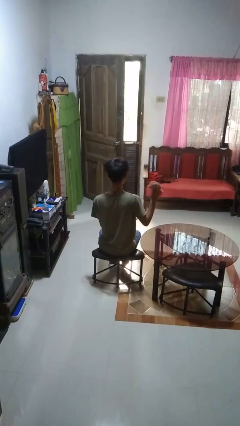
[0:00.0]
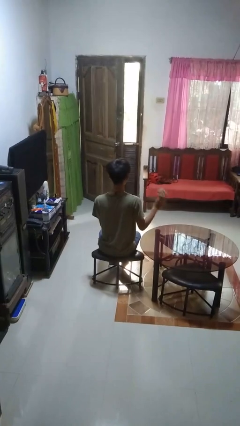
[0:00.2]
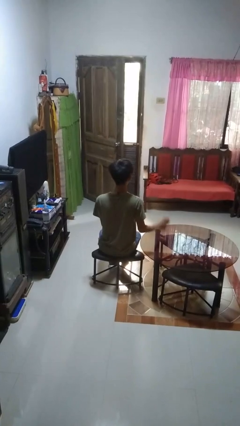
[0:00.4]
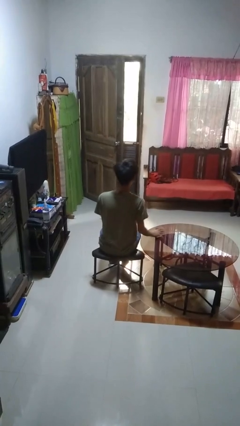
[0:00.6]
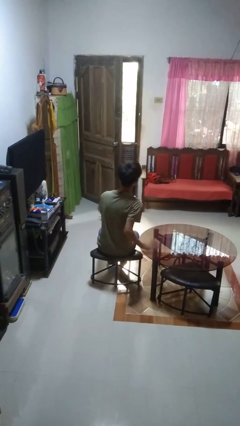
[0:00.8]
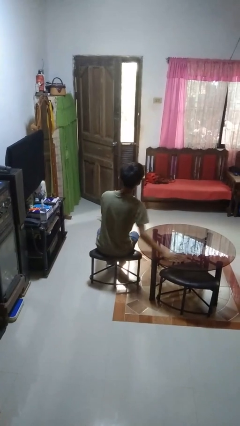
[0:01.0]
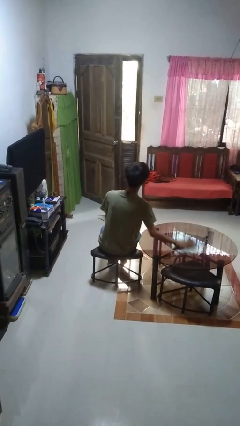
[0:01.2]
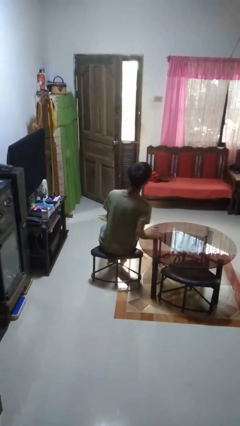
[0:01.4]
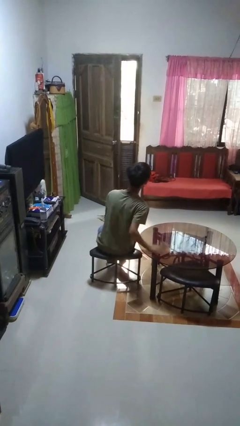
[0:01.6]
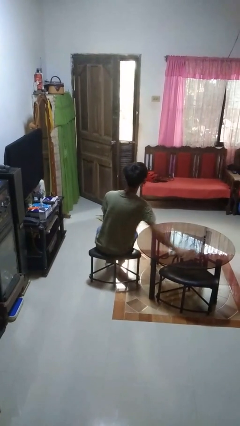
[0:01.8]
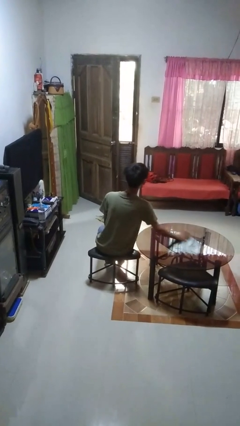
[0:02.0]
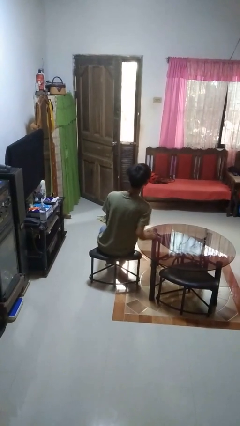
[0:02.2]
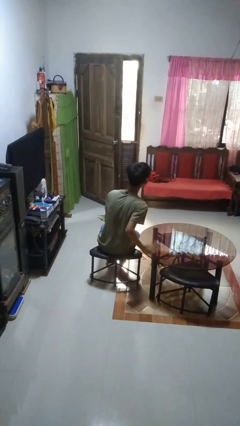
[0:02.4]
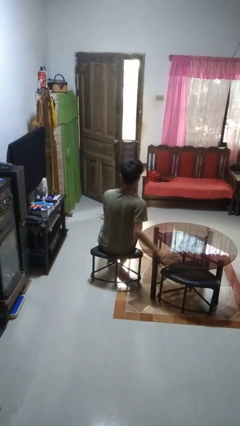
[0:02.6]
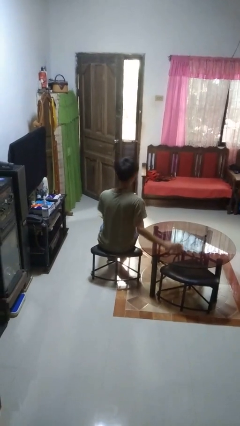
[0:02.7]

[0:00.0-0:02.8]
person cleans table with rag

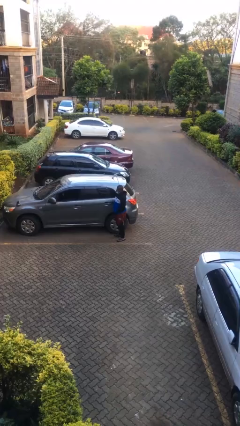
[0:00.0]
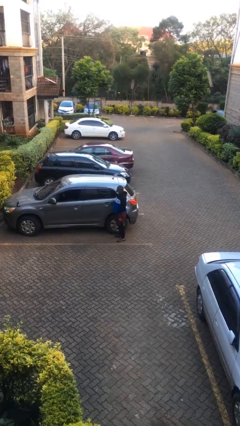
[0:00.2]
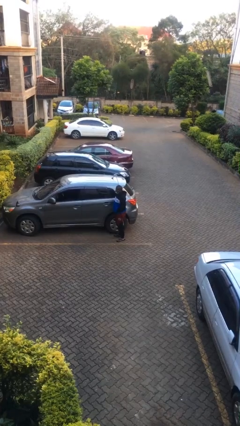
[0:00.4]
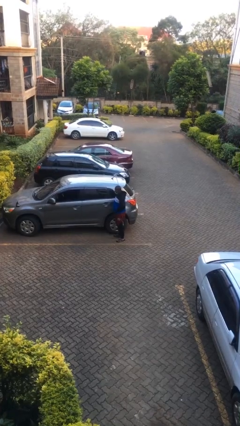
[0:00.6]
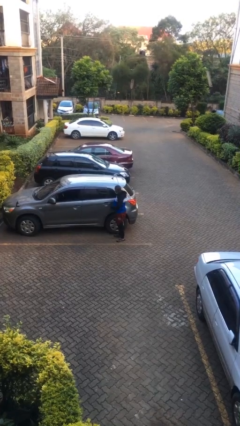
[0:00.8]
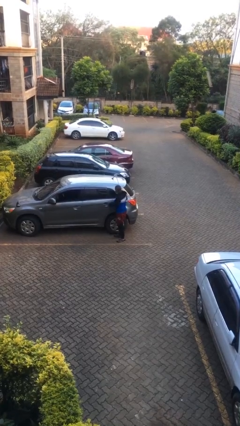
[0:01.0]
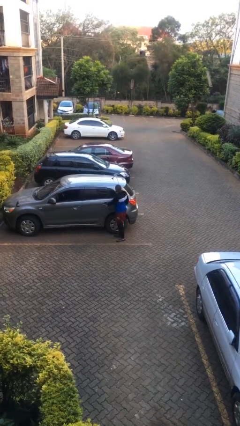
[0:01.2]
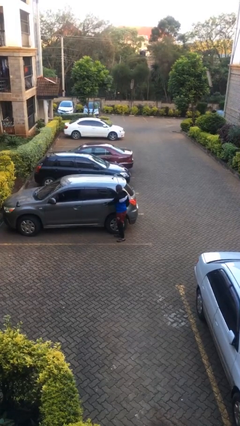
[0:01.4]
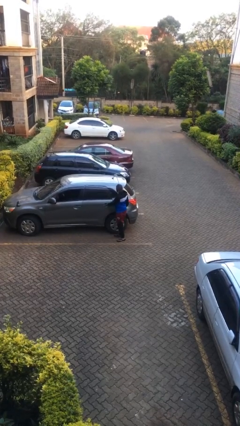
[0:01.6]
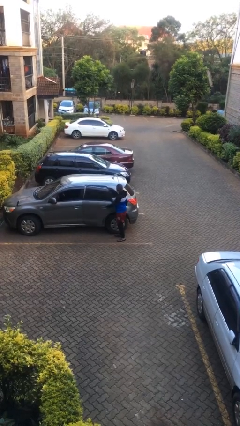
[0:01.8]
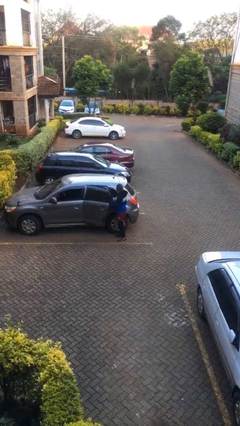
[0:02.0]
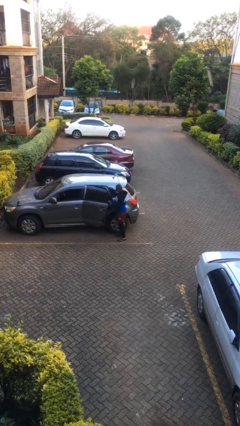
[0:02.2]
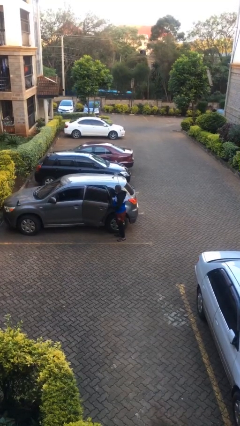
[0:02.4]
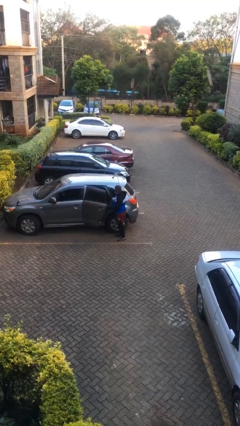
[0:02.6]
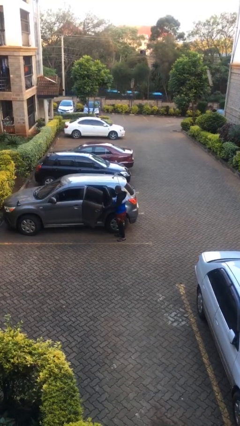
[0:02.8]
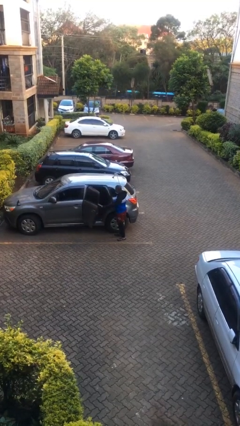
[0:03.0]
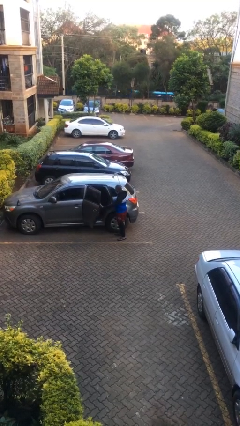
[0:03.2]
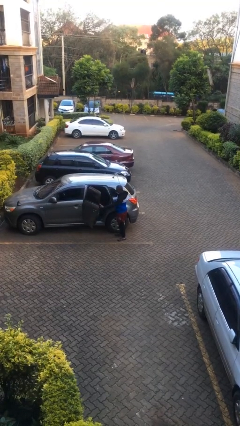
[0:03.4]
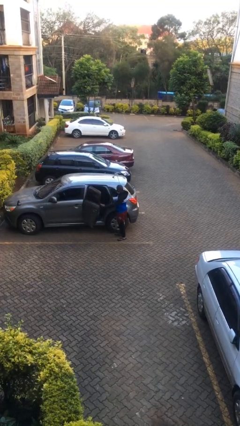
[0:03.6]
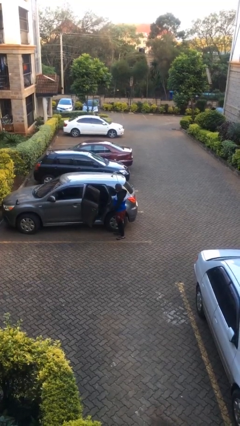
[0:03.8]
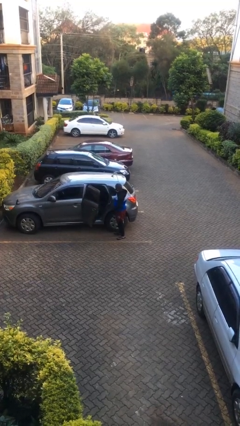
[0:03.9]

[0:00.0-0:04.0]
person opens car door

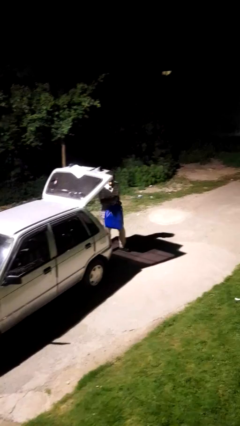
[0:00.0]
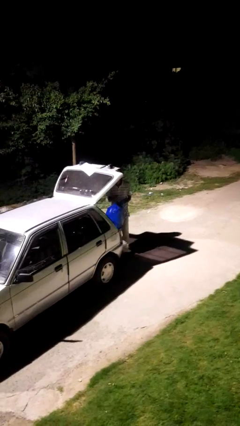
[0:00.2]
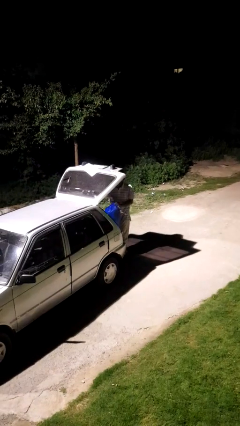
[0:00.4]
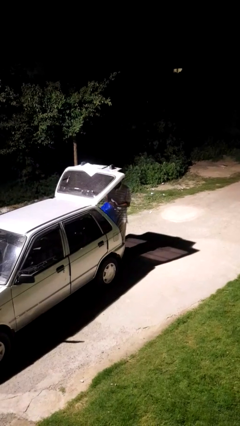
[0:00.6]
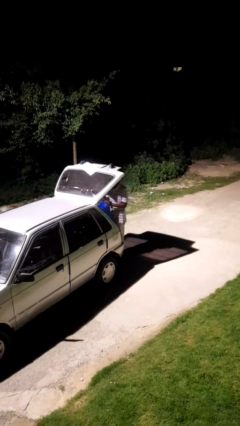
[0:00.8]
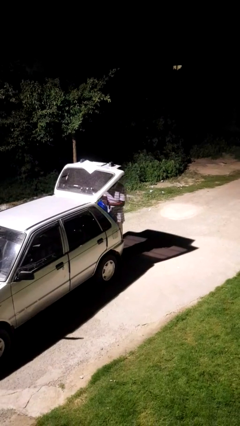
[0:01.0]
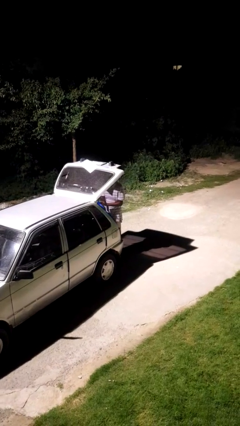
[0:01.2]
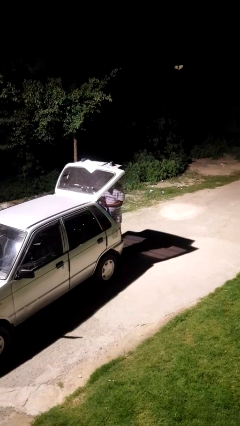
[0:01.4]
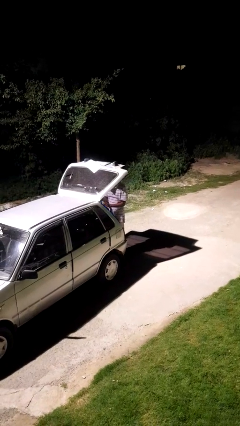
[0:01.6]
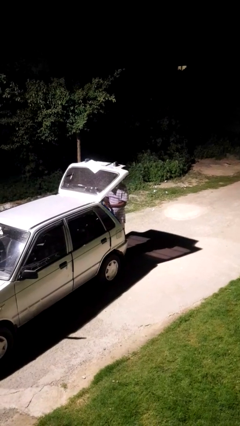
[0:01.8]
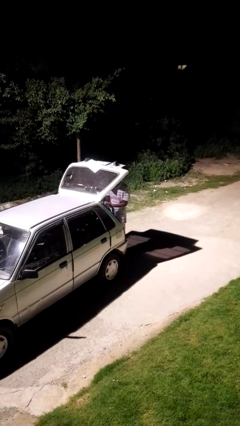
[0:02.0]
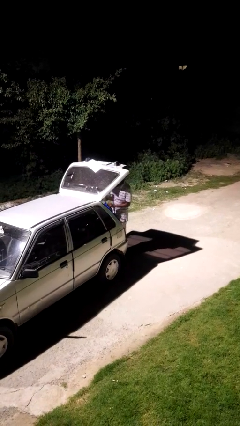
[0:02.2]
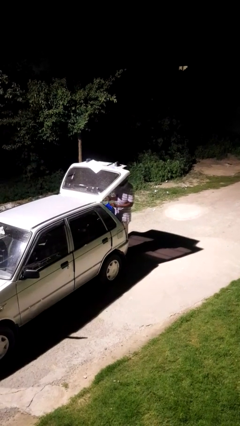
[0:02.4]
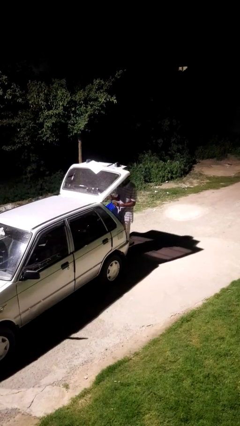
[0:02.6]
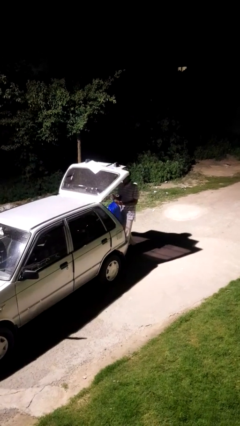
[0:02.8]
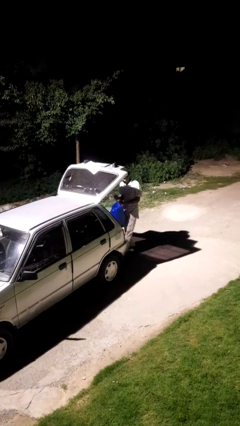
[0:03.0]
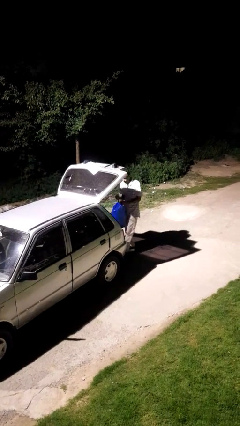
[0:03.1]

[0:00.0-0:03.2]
person loads car

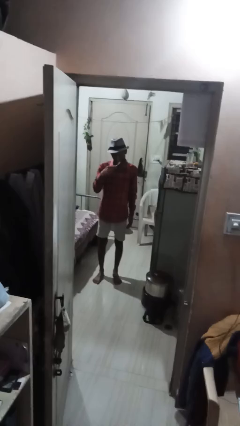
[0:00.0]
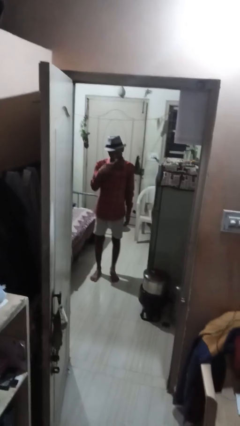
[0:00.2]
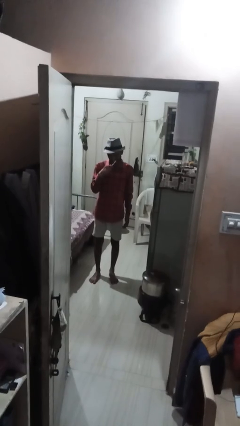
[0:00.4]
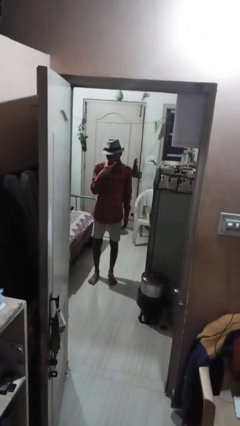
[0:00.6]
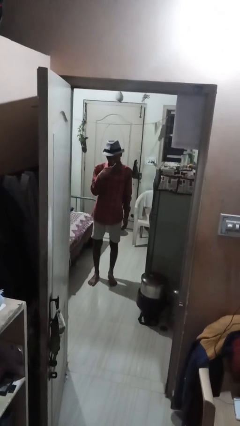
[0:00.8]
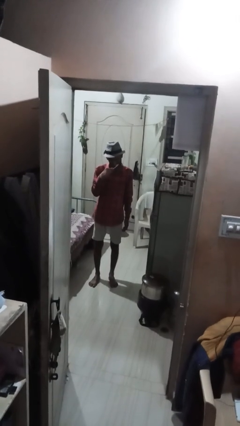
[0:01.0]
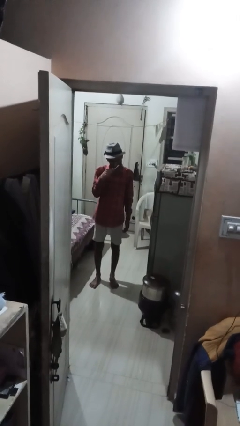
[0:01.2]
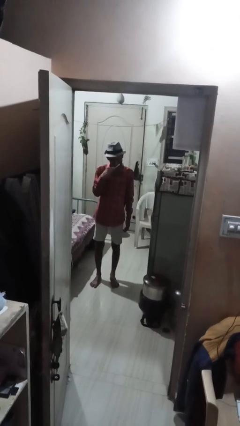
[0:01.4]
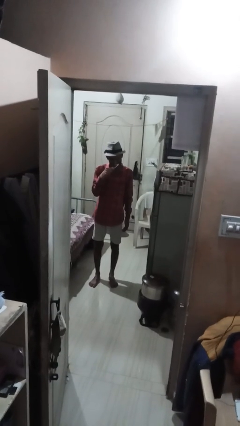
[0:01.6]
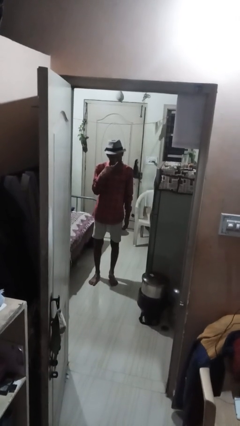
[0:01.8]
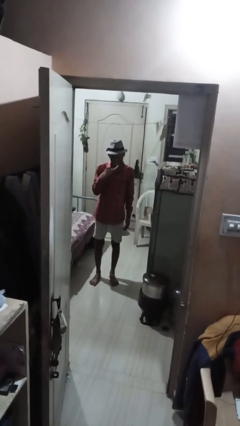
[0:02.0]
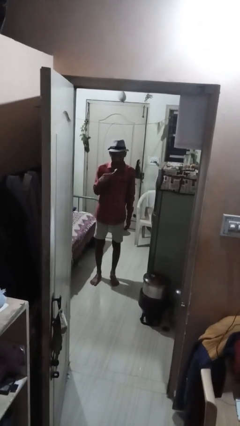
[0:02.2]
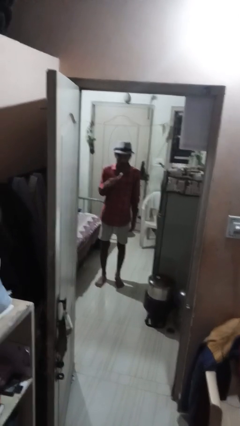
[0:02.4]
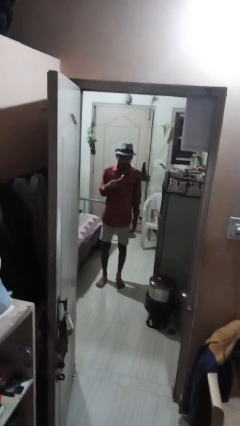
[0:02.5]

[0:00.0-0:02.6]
person brushes teeth

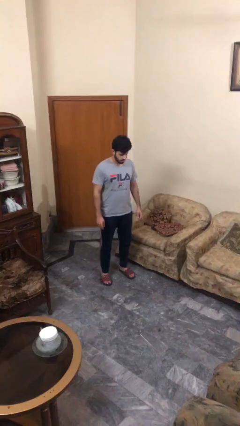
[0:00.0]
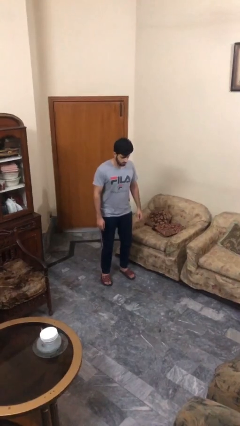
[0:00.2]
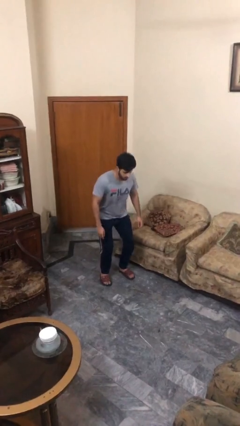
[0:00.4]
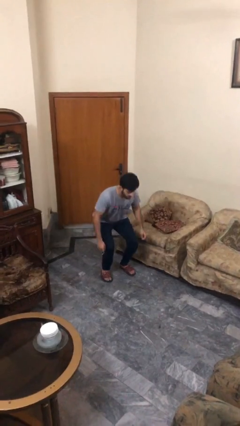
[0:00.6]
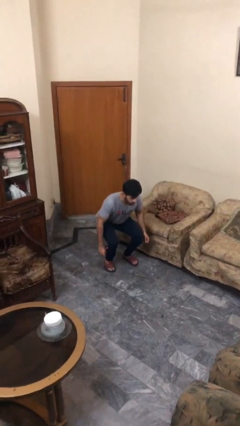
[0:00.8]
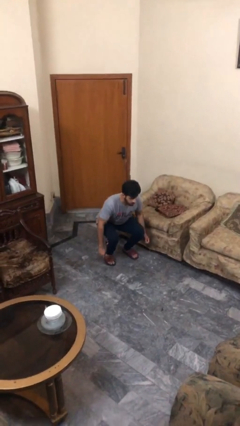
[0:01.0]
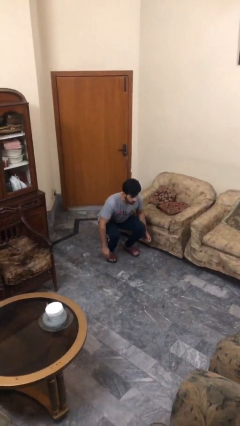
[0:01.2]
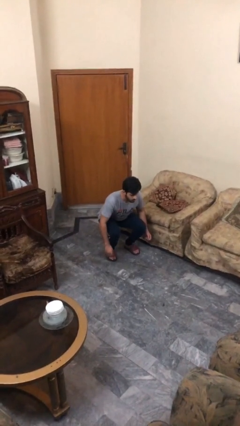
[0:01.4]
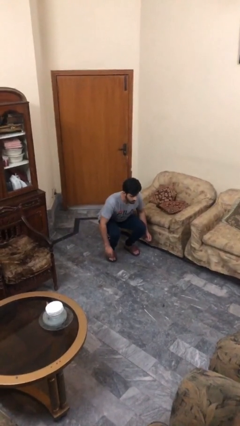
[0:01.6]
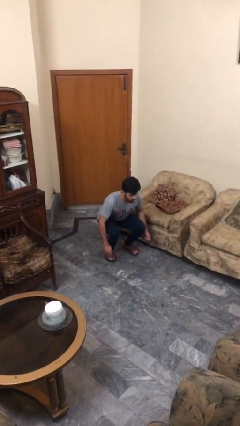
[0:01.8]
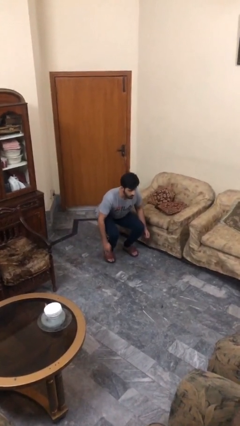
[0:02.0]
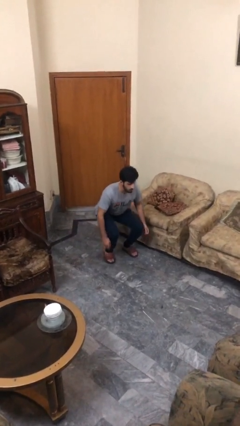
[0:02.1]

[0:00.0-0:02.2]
person squats

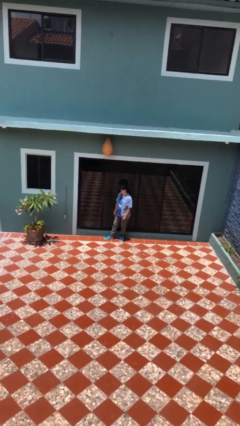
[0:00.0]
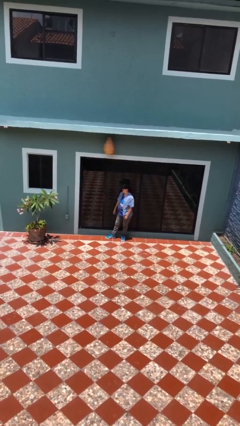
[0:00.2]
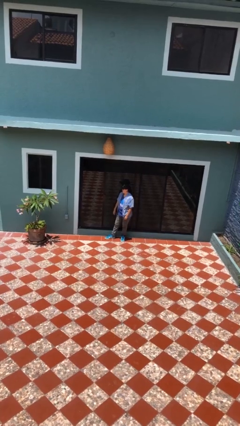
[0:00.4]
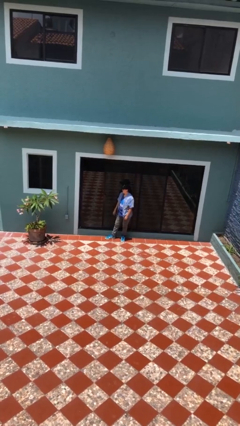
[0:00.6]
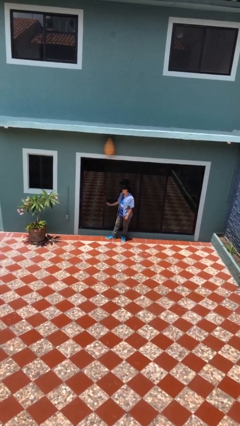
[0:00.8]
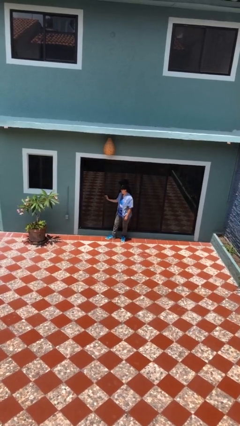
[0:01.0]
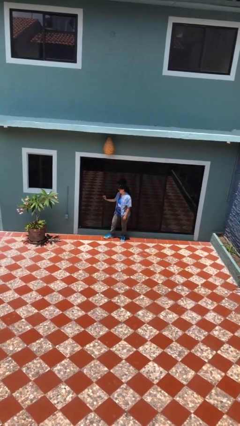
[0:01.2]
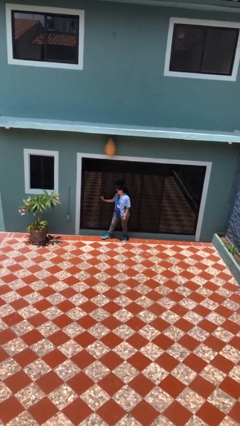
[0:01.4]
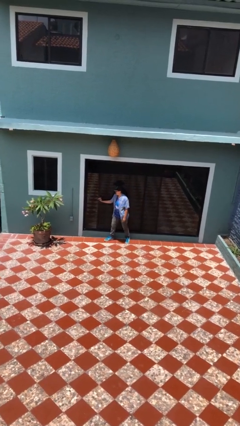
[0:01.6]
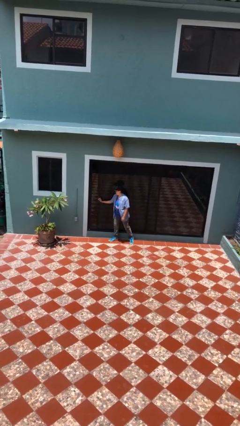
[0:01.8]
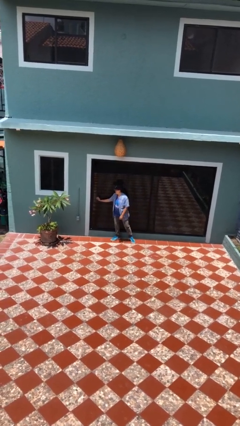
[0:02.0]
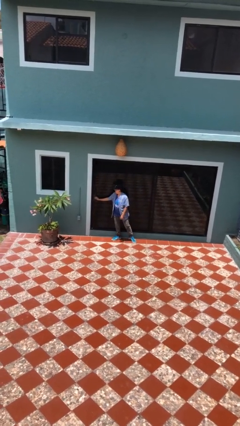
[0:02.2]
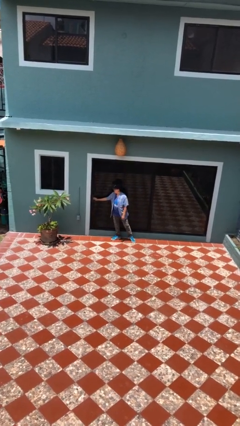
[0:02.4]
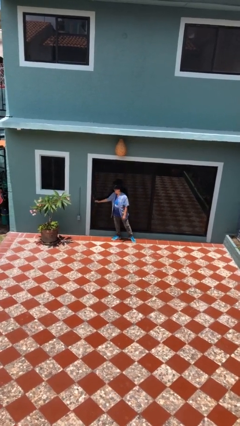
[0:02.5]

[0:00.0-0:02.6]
person closes sliding door
